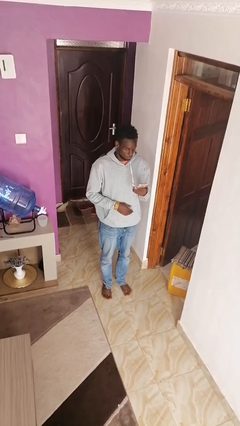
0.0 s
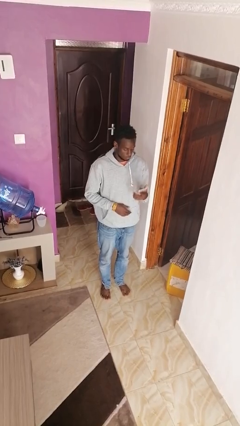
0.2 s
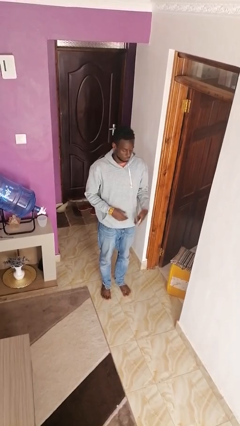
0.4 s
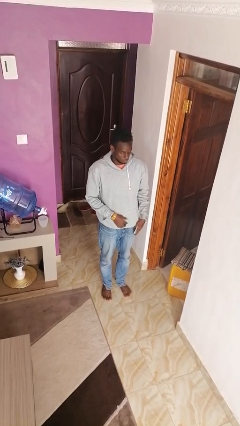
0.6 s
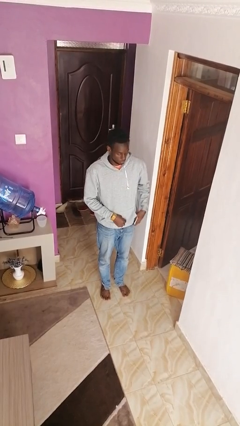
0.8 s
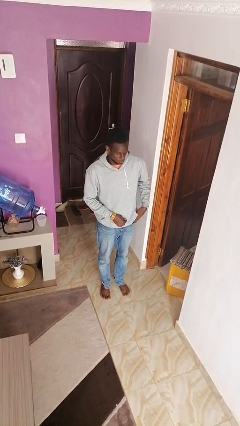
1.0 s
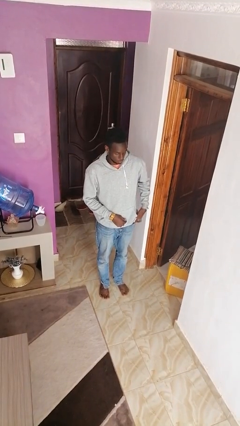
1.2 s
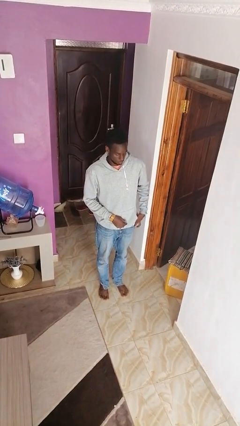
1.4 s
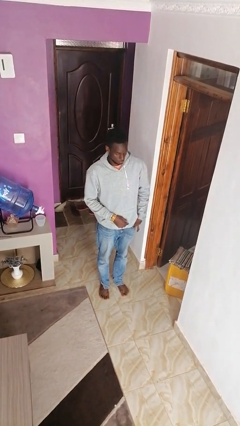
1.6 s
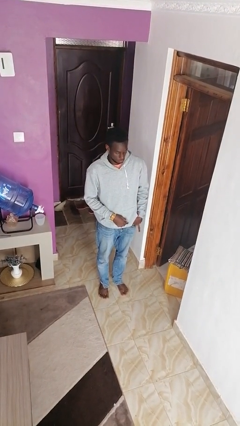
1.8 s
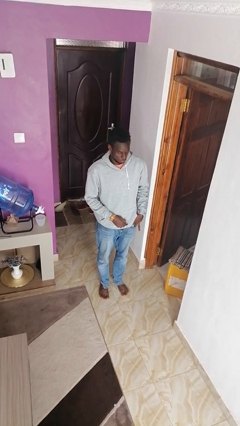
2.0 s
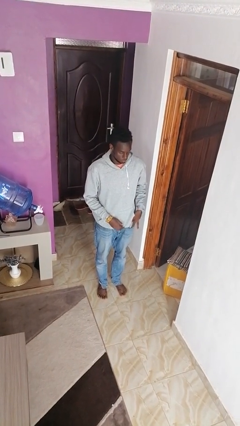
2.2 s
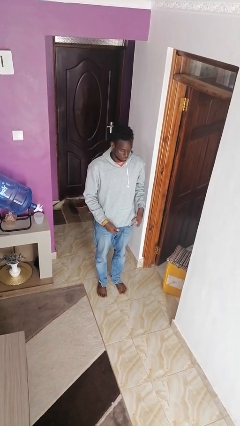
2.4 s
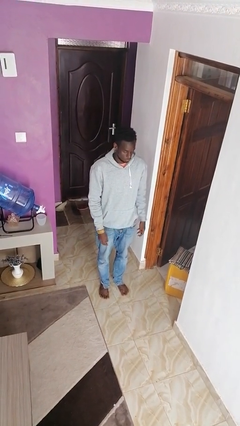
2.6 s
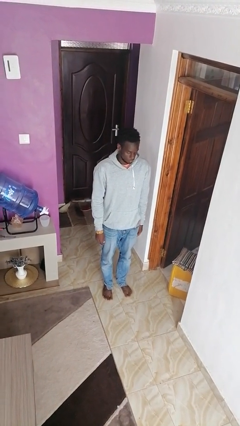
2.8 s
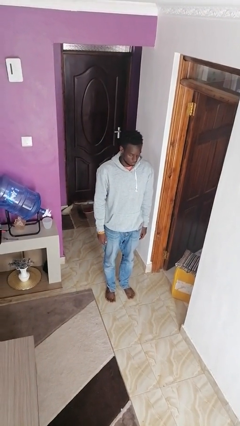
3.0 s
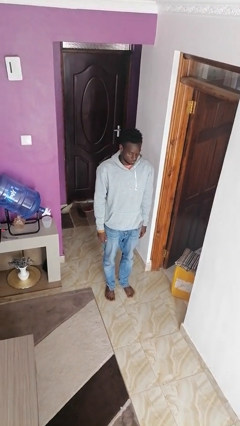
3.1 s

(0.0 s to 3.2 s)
person puts phone into pocket

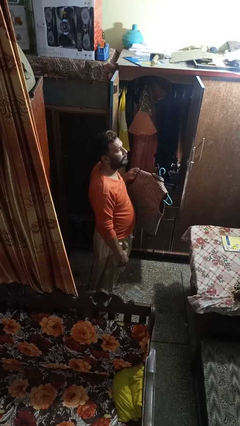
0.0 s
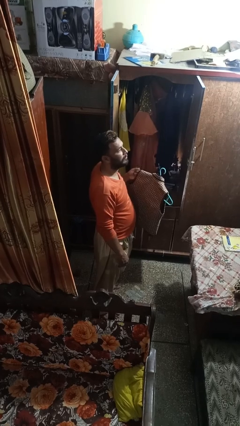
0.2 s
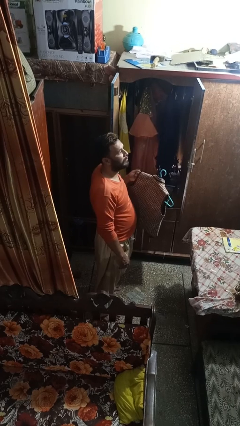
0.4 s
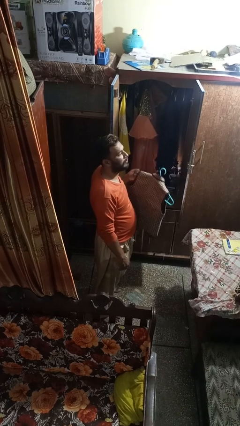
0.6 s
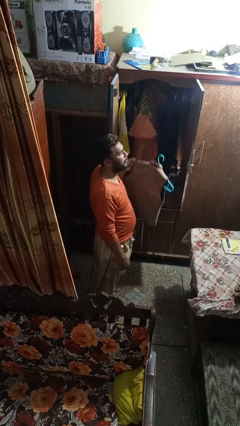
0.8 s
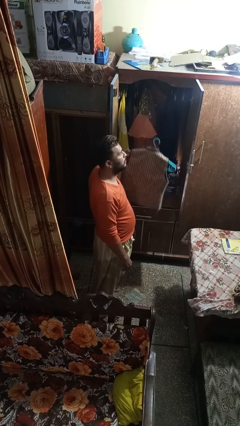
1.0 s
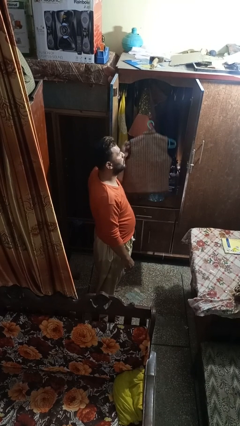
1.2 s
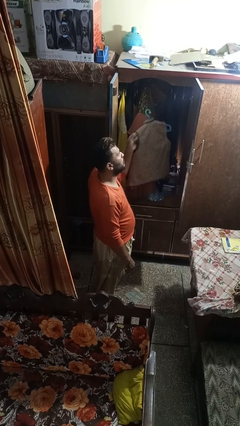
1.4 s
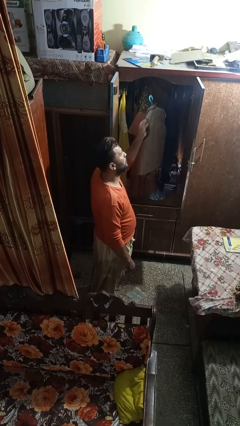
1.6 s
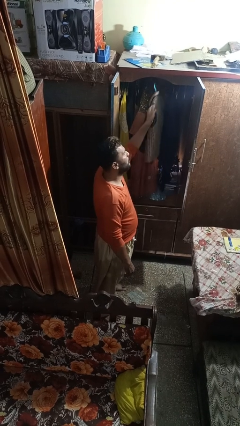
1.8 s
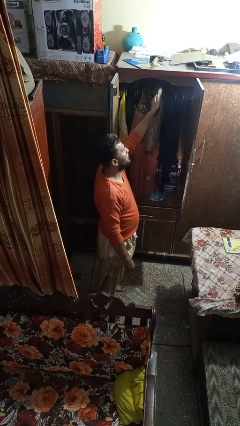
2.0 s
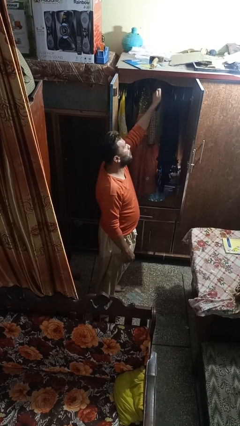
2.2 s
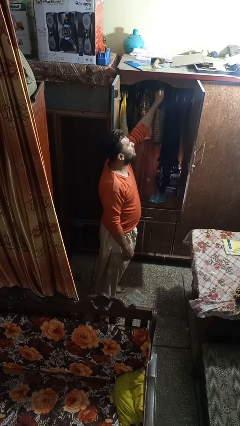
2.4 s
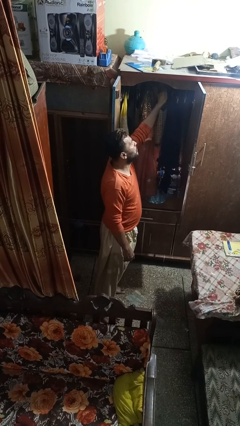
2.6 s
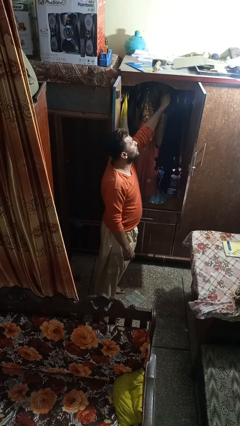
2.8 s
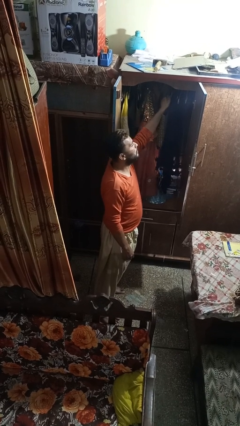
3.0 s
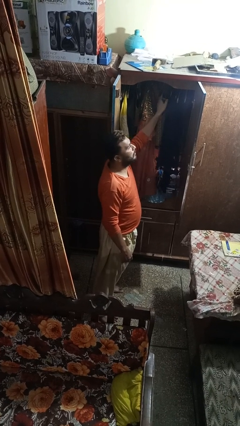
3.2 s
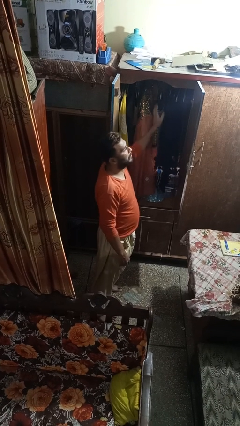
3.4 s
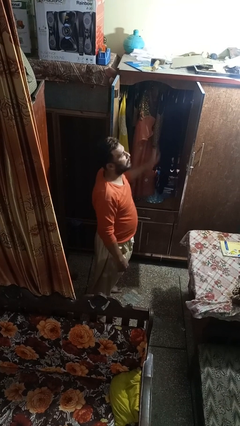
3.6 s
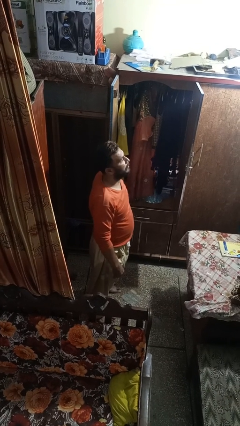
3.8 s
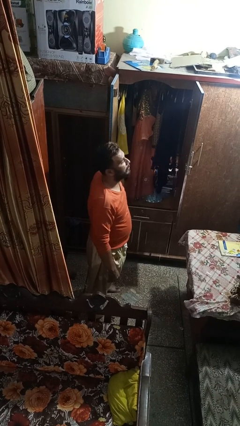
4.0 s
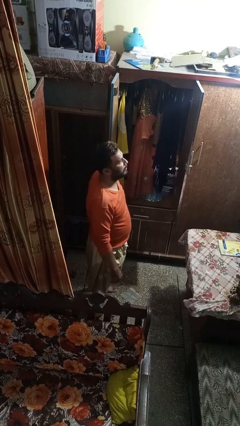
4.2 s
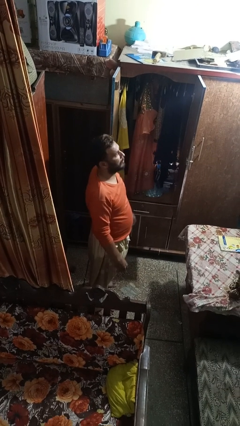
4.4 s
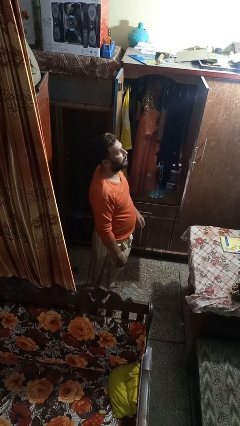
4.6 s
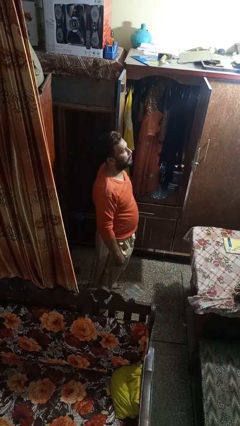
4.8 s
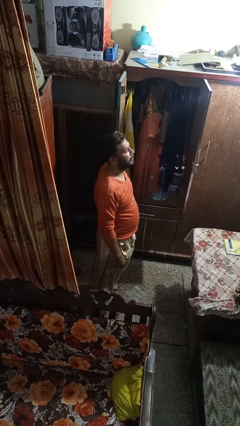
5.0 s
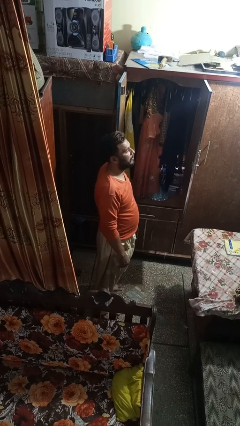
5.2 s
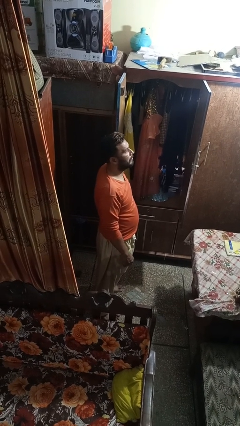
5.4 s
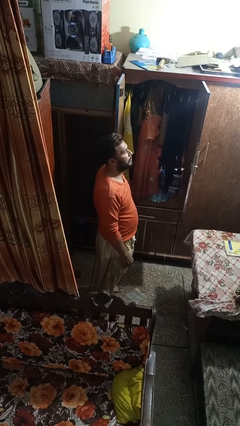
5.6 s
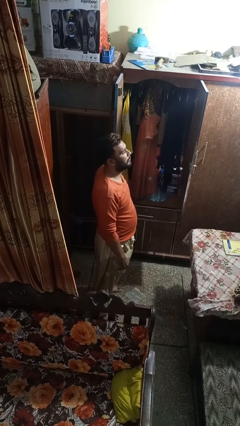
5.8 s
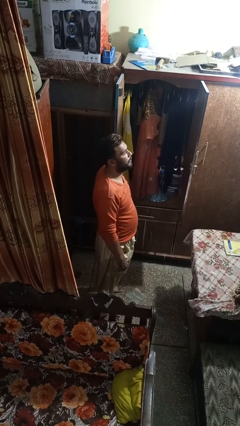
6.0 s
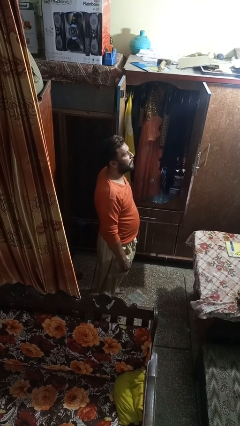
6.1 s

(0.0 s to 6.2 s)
person puts clothes into closet

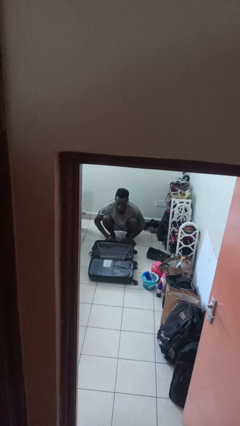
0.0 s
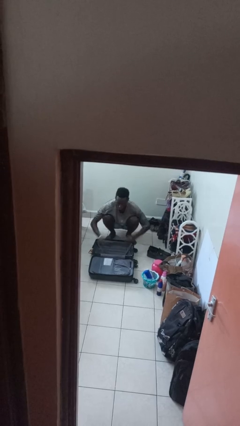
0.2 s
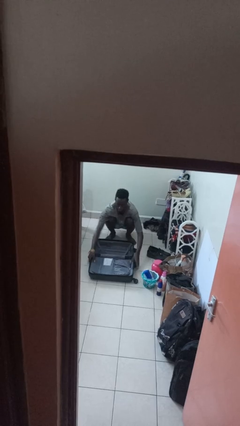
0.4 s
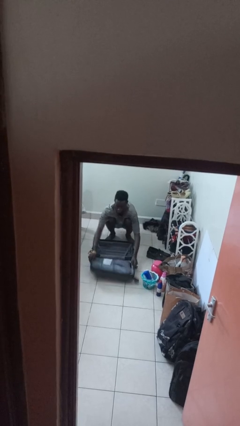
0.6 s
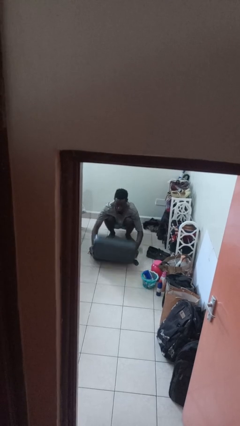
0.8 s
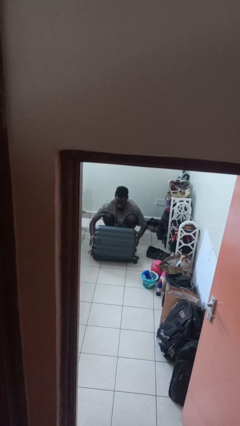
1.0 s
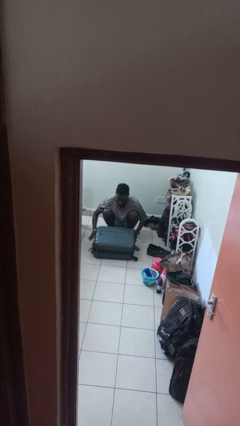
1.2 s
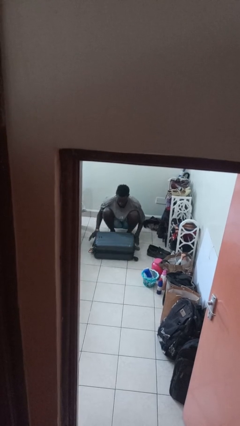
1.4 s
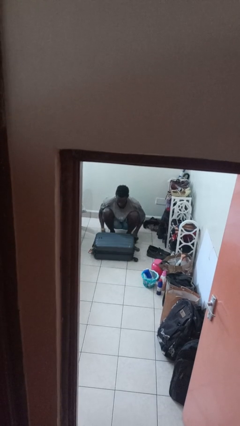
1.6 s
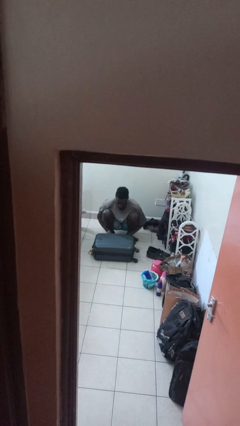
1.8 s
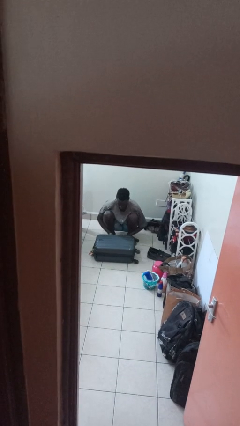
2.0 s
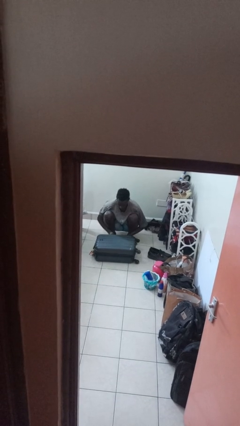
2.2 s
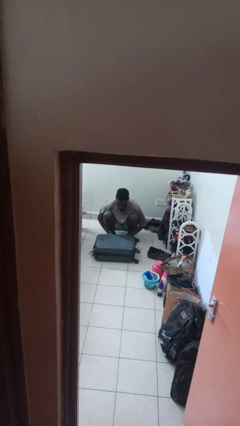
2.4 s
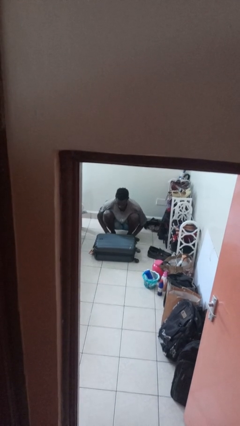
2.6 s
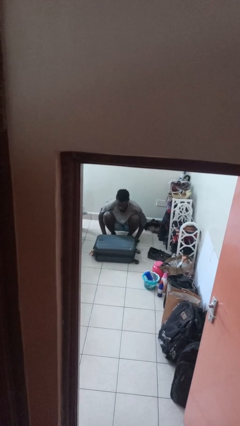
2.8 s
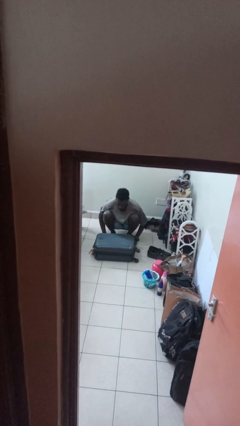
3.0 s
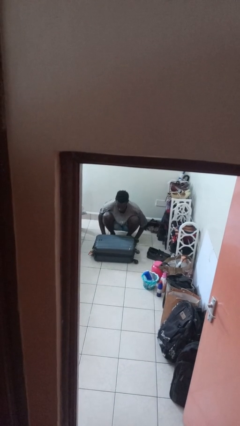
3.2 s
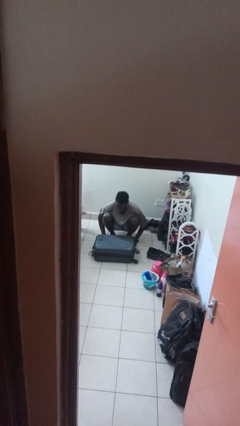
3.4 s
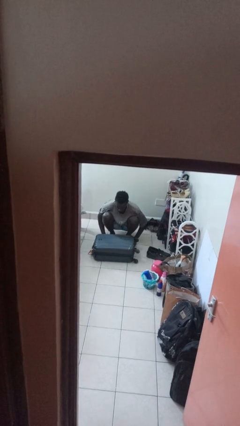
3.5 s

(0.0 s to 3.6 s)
person closes suitcase

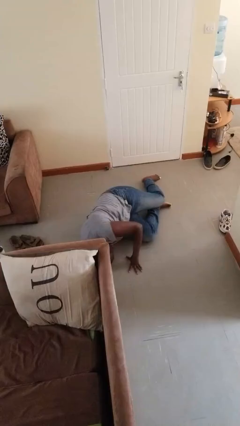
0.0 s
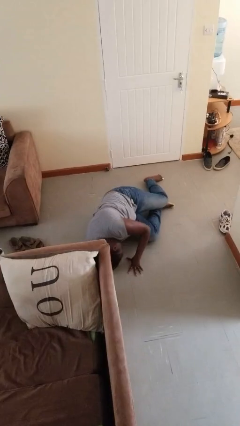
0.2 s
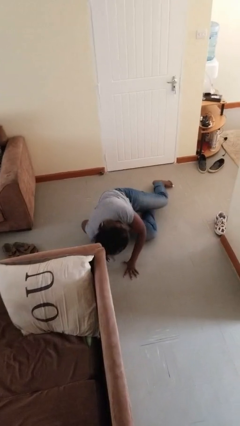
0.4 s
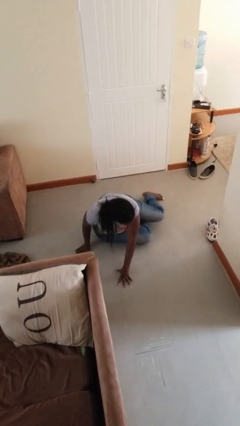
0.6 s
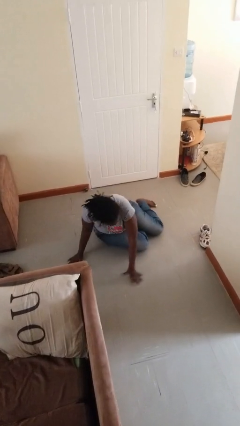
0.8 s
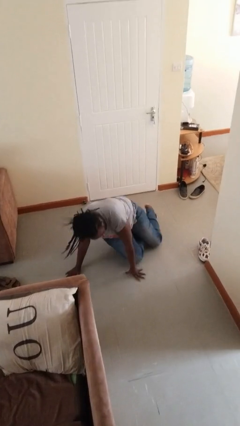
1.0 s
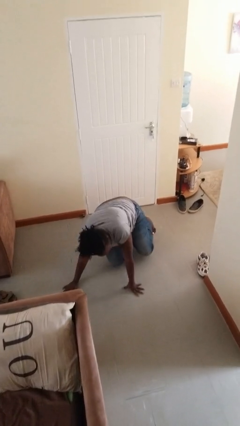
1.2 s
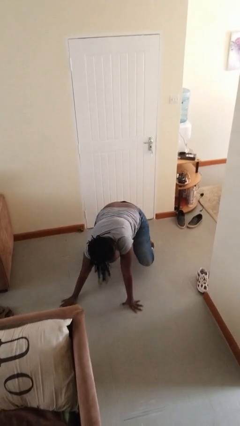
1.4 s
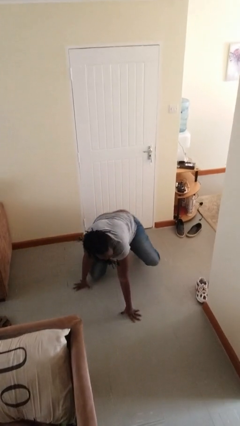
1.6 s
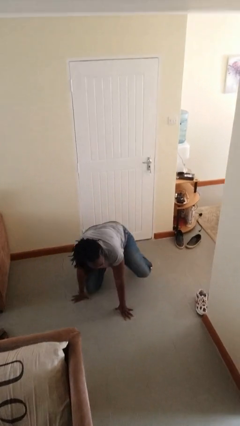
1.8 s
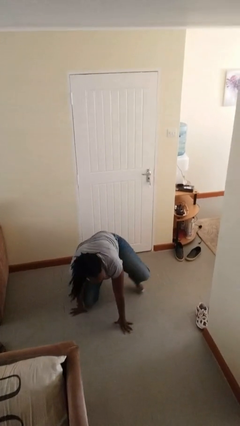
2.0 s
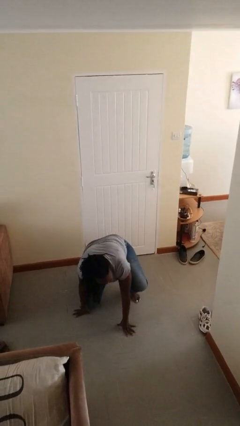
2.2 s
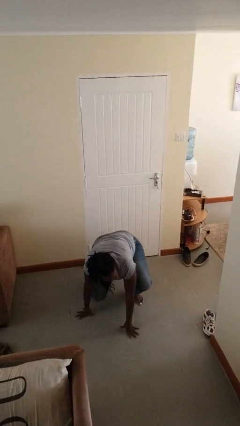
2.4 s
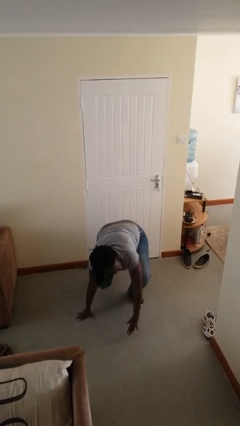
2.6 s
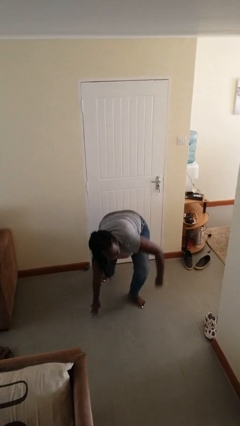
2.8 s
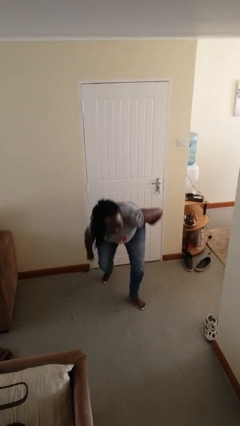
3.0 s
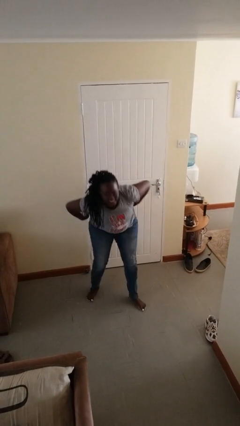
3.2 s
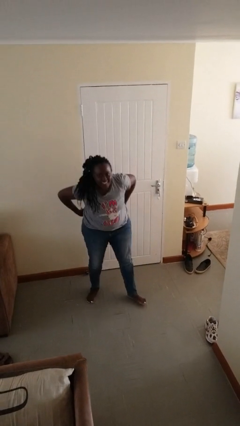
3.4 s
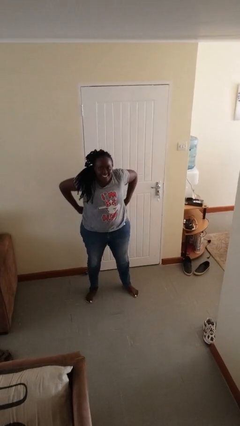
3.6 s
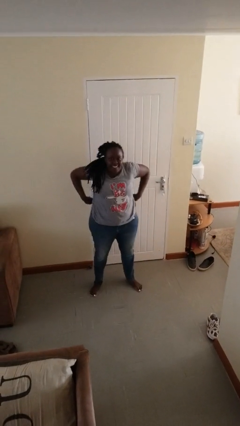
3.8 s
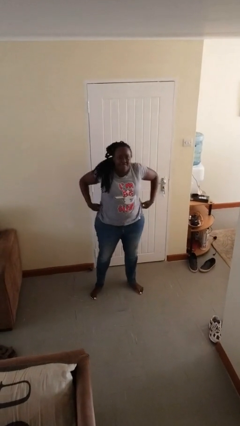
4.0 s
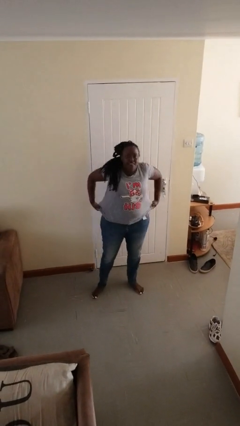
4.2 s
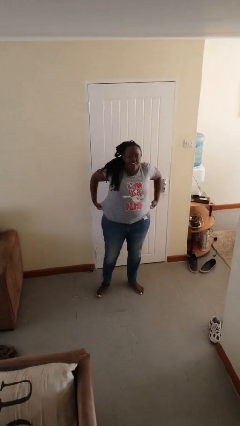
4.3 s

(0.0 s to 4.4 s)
person stands up from floor

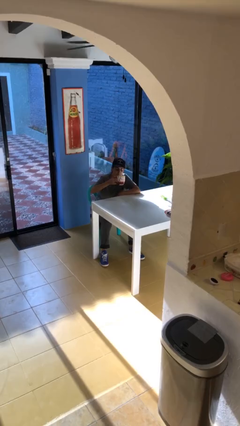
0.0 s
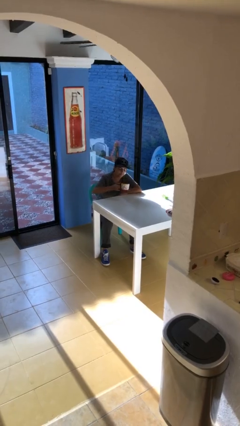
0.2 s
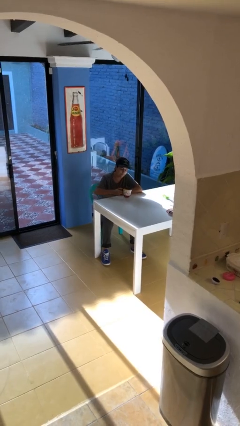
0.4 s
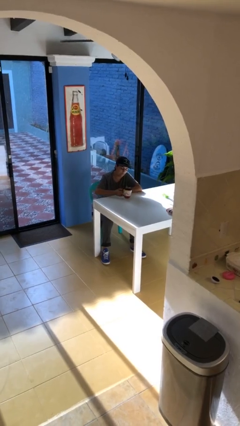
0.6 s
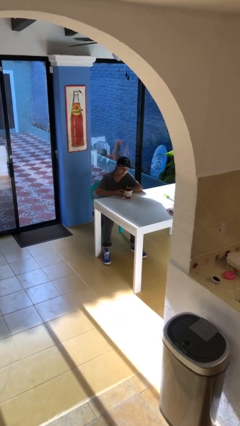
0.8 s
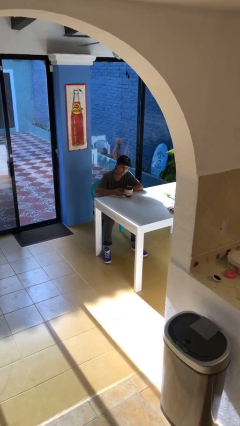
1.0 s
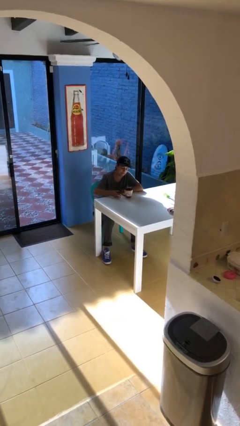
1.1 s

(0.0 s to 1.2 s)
person puts down object on table
